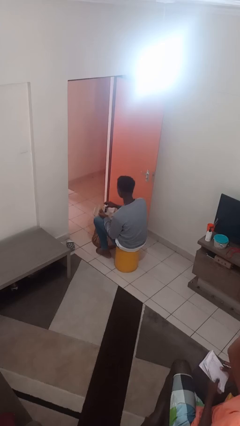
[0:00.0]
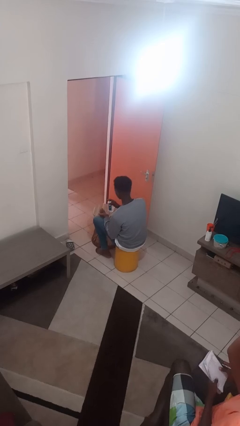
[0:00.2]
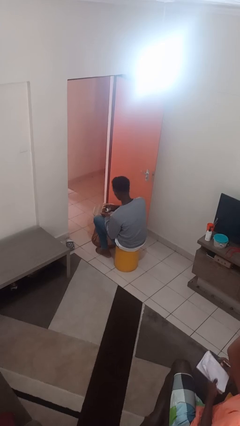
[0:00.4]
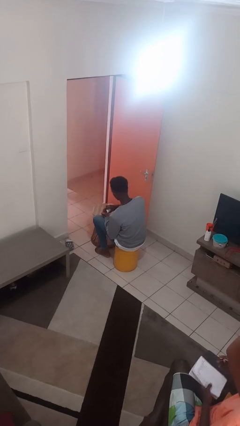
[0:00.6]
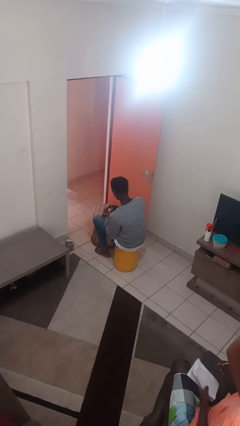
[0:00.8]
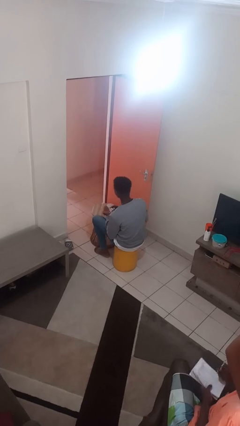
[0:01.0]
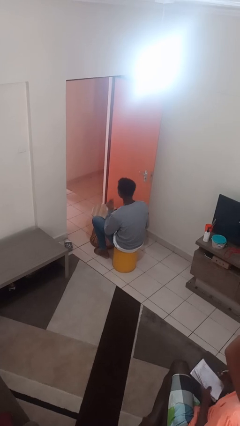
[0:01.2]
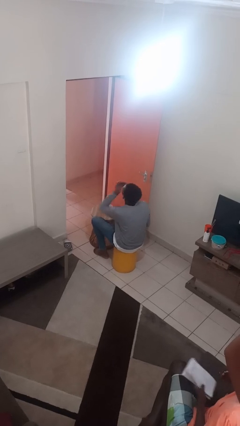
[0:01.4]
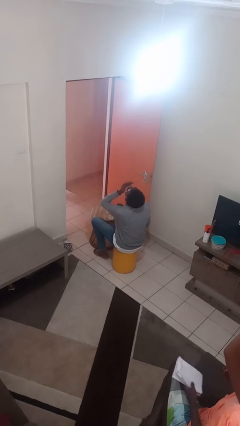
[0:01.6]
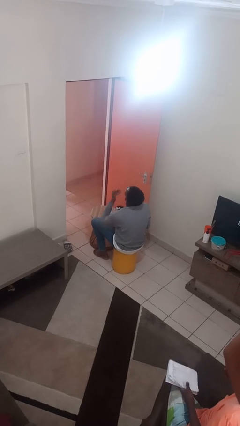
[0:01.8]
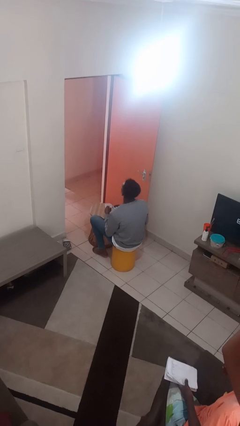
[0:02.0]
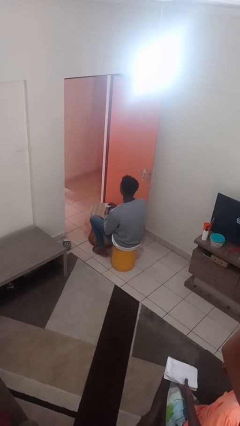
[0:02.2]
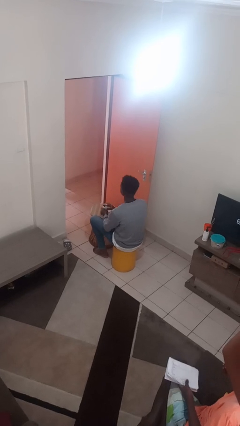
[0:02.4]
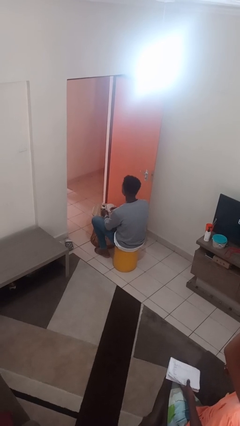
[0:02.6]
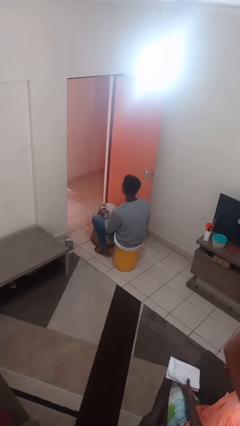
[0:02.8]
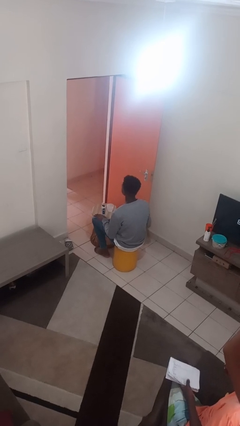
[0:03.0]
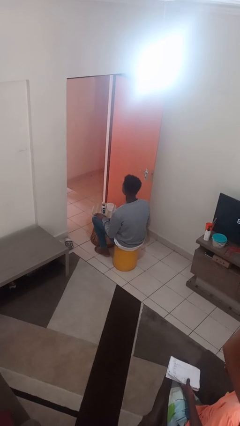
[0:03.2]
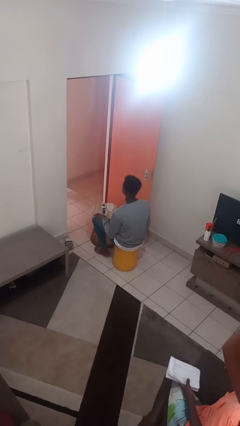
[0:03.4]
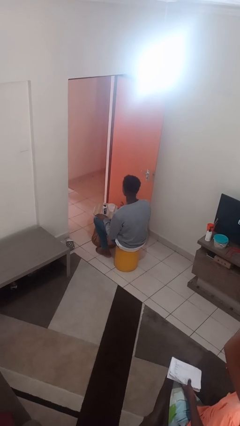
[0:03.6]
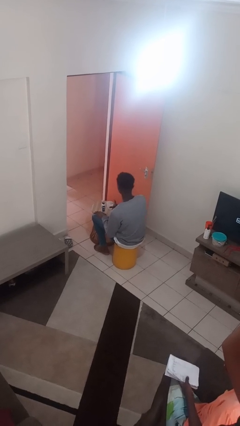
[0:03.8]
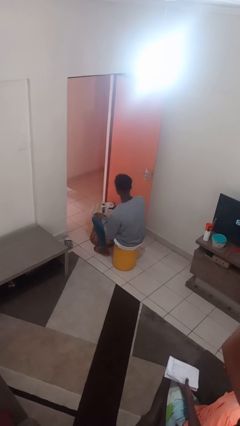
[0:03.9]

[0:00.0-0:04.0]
person takes medicine pills

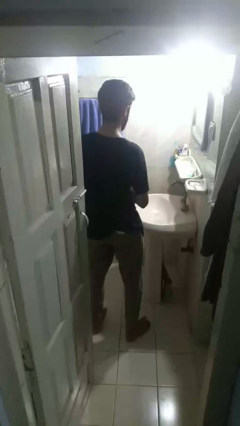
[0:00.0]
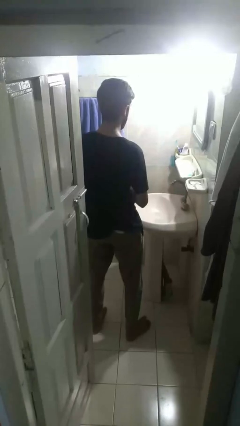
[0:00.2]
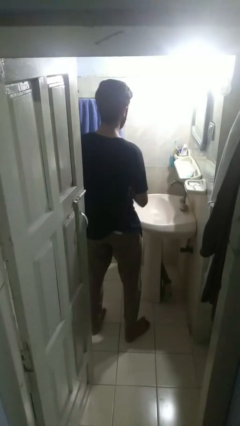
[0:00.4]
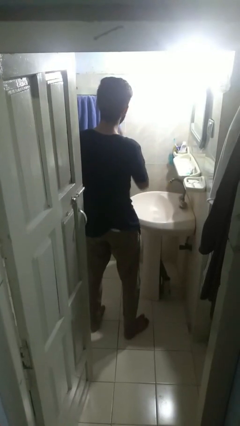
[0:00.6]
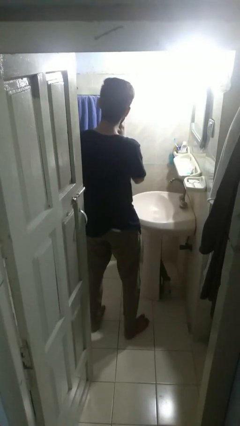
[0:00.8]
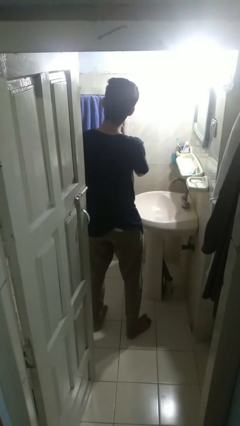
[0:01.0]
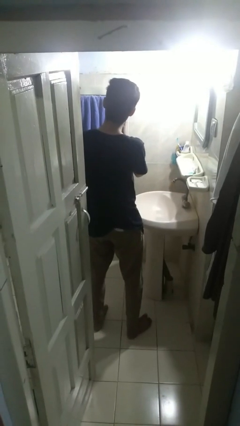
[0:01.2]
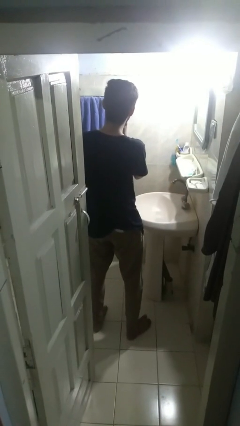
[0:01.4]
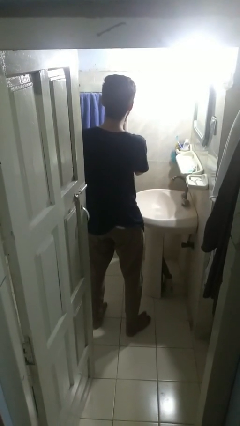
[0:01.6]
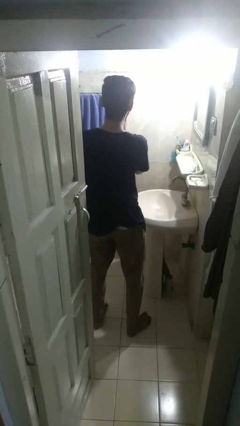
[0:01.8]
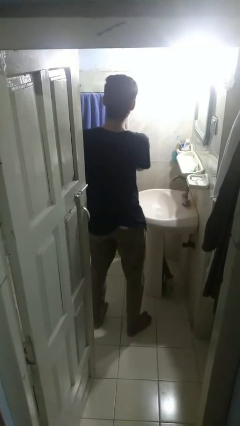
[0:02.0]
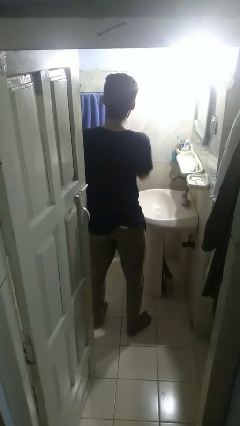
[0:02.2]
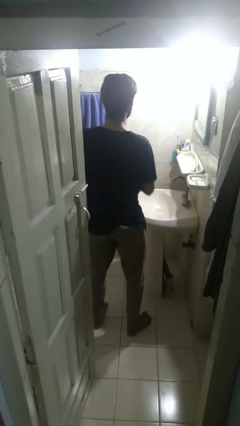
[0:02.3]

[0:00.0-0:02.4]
person flosses

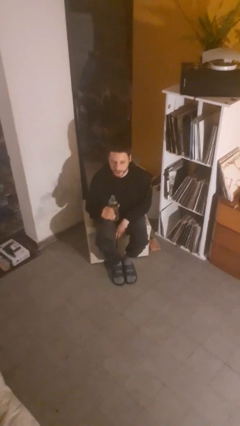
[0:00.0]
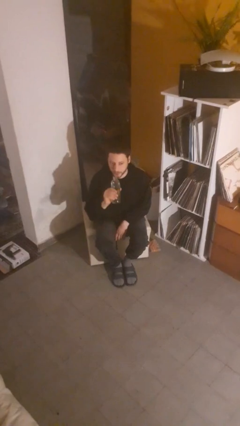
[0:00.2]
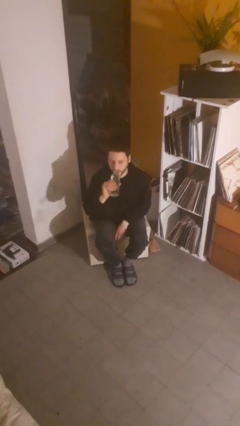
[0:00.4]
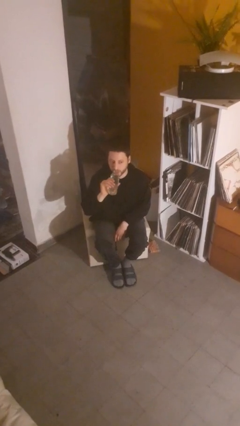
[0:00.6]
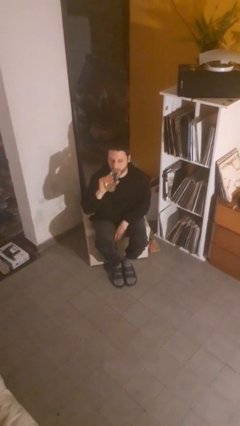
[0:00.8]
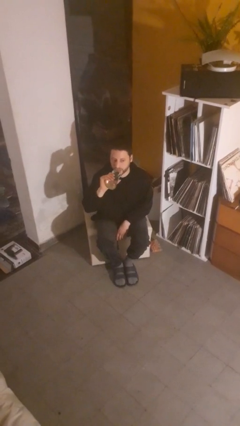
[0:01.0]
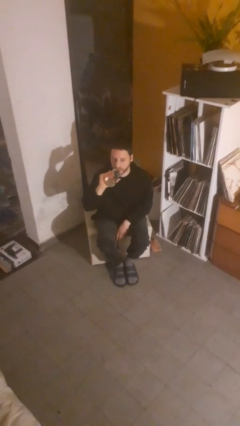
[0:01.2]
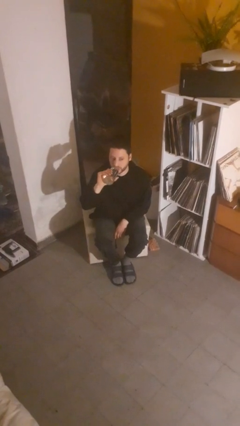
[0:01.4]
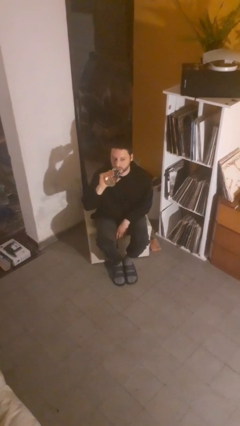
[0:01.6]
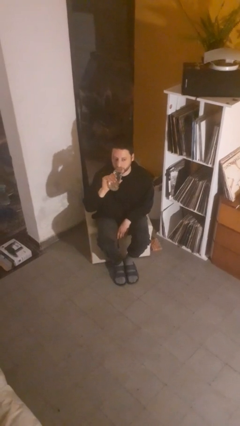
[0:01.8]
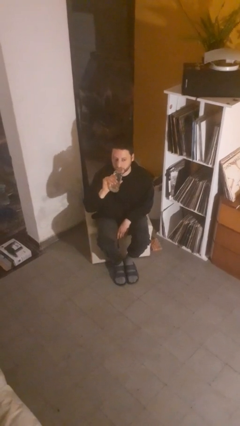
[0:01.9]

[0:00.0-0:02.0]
person drinks from bottle

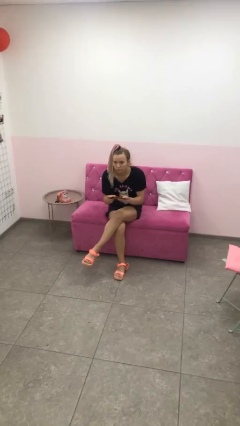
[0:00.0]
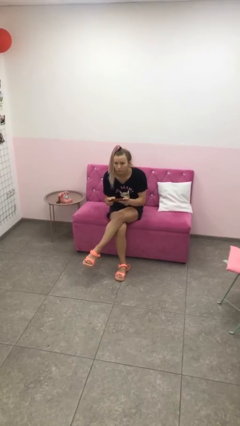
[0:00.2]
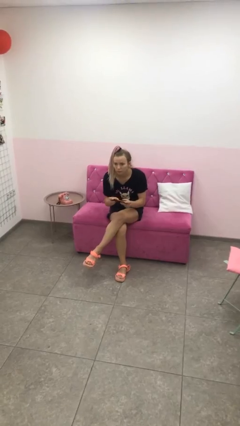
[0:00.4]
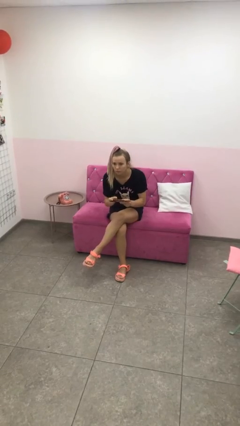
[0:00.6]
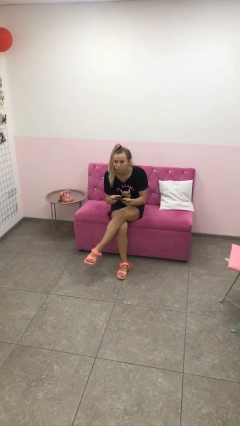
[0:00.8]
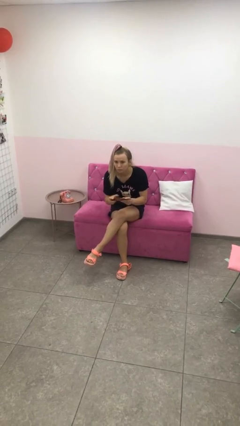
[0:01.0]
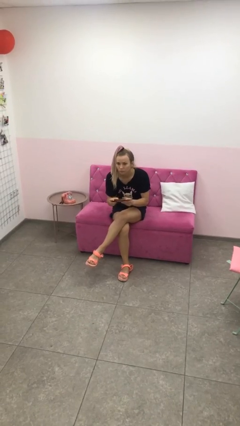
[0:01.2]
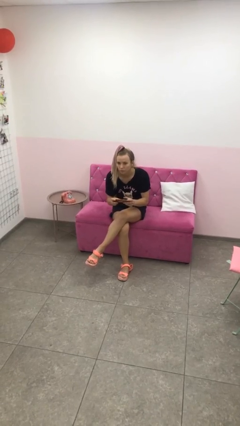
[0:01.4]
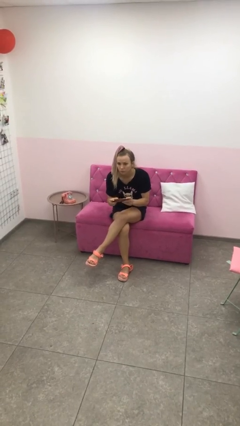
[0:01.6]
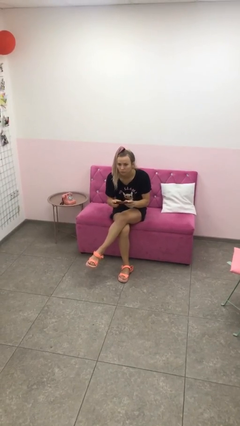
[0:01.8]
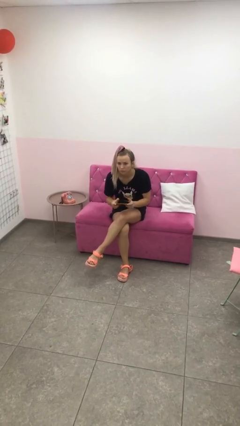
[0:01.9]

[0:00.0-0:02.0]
person interacts with handheld game

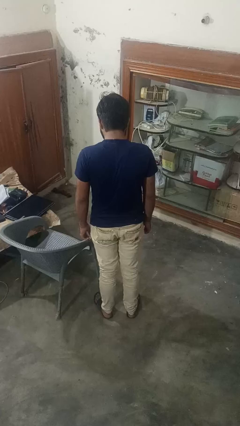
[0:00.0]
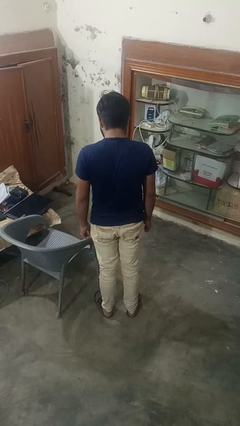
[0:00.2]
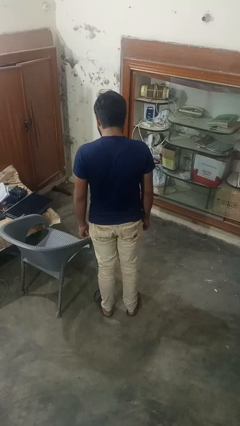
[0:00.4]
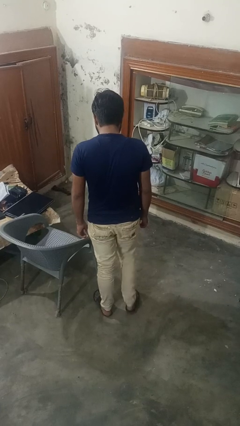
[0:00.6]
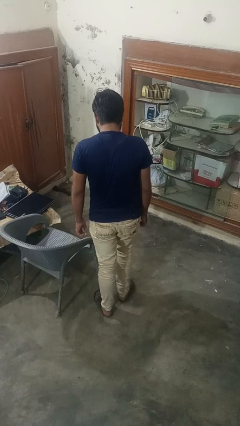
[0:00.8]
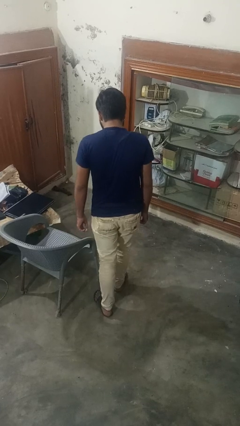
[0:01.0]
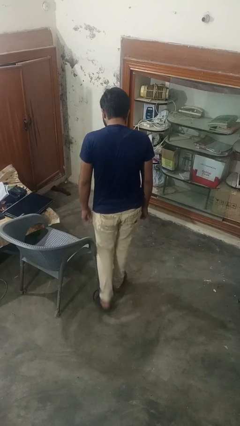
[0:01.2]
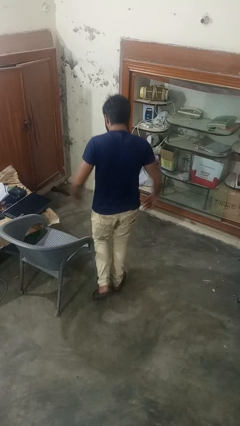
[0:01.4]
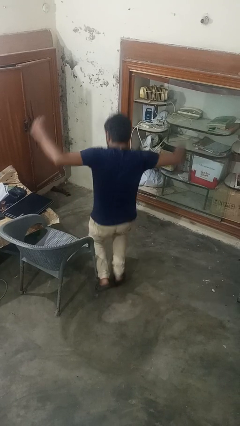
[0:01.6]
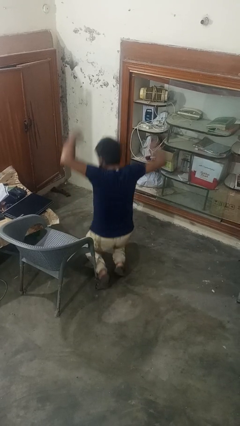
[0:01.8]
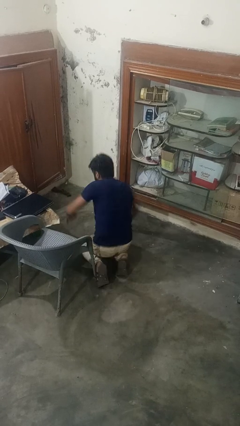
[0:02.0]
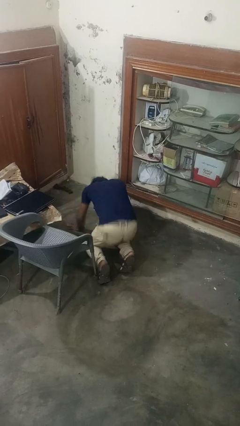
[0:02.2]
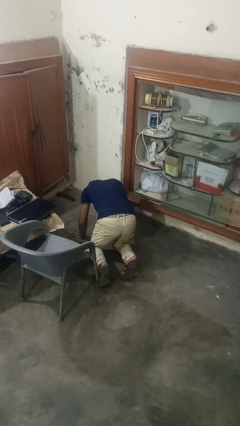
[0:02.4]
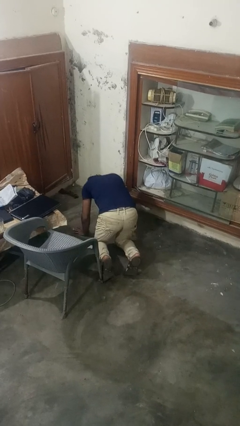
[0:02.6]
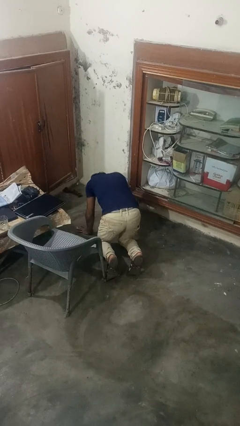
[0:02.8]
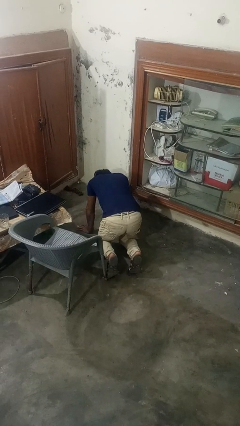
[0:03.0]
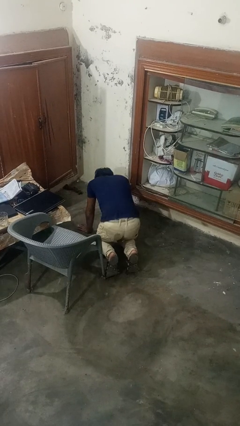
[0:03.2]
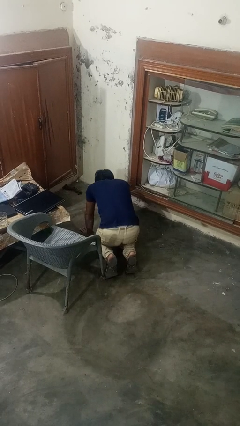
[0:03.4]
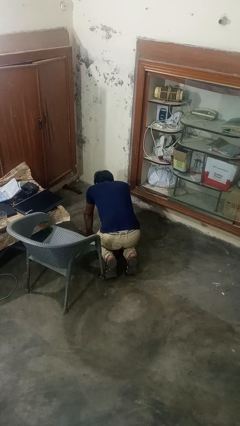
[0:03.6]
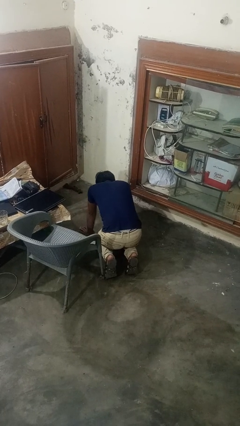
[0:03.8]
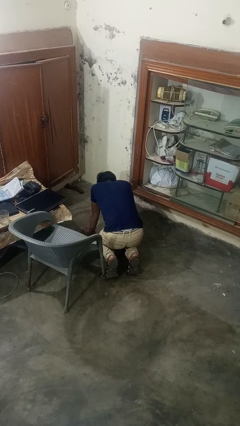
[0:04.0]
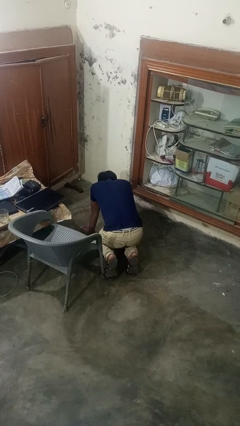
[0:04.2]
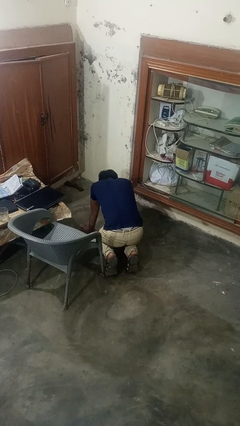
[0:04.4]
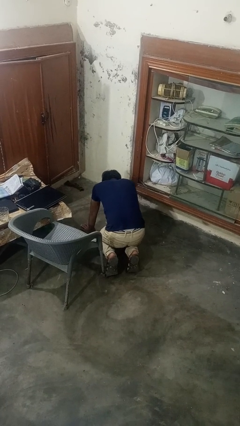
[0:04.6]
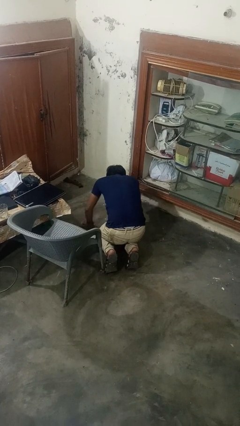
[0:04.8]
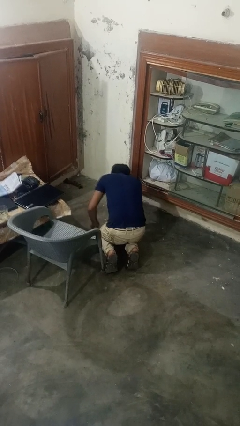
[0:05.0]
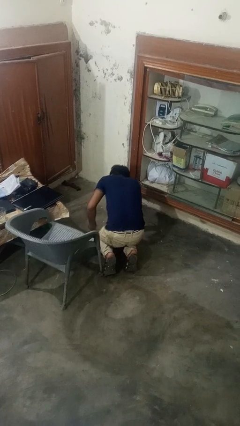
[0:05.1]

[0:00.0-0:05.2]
person trips on object on floor

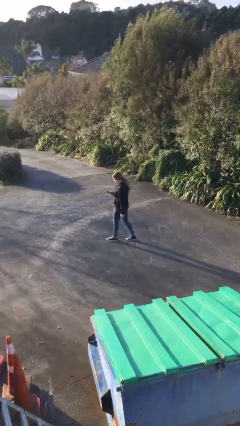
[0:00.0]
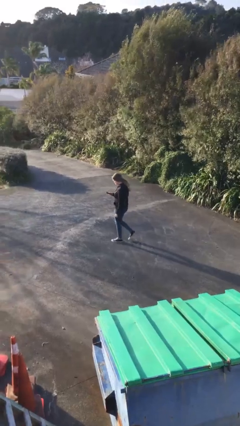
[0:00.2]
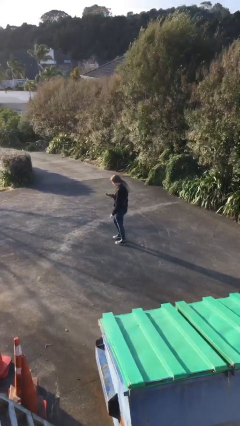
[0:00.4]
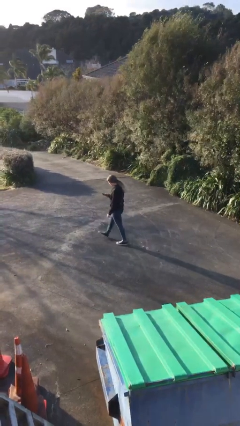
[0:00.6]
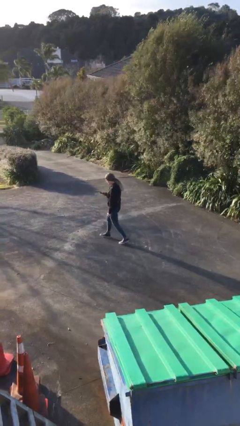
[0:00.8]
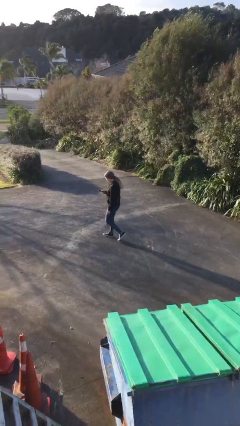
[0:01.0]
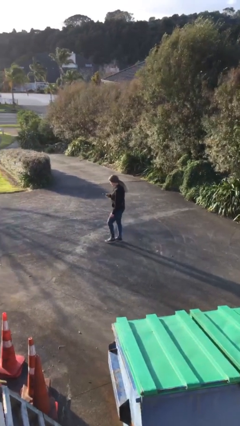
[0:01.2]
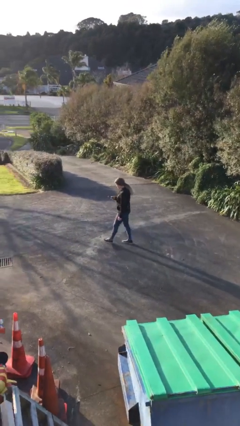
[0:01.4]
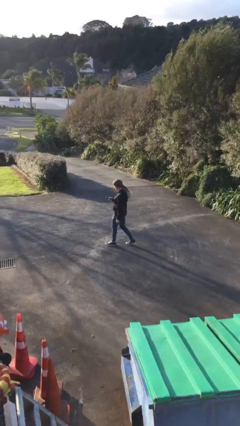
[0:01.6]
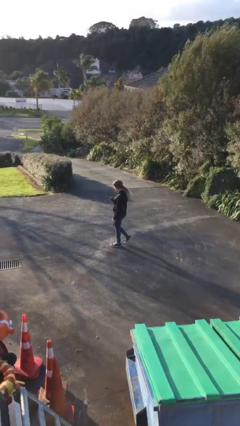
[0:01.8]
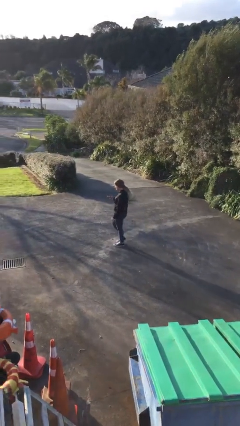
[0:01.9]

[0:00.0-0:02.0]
person texts on phone
